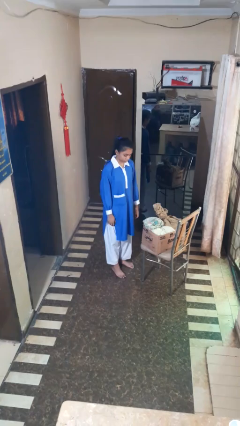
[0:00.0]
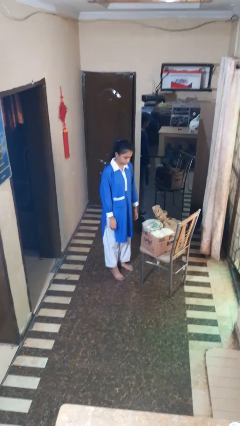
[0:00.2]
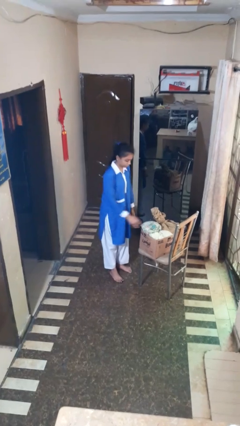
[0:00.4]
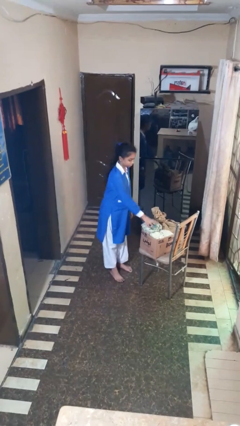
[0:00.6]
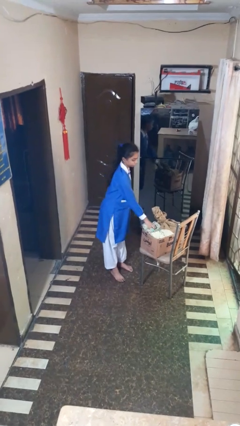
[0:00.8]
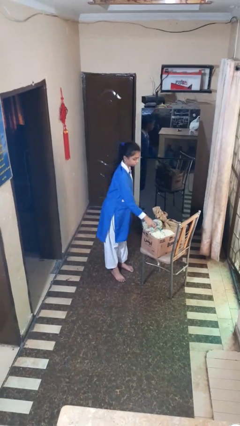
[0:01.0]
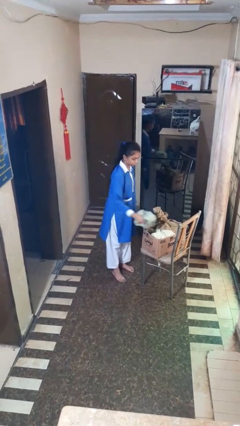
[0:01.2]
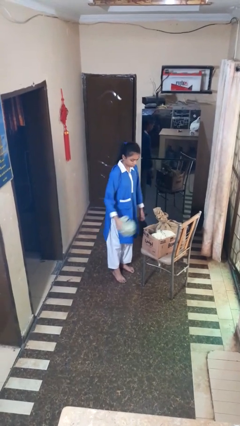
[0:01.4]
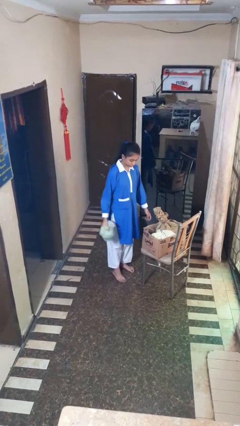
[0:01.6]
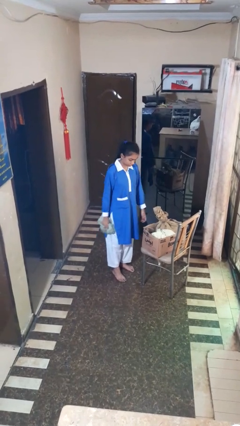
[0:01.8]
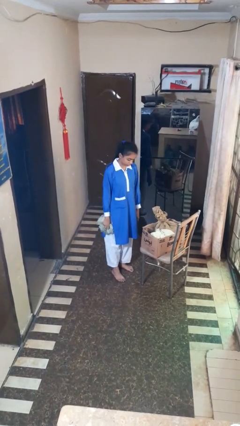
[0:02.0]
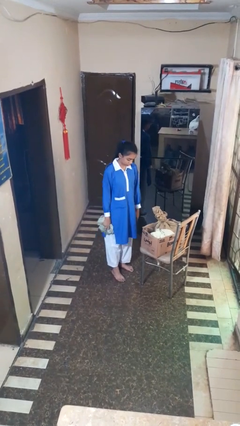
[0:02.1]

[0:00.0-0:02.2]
person takes object from box

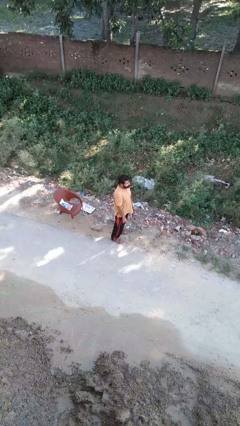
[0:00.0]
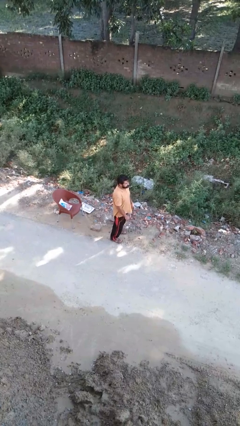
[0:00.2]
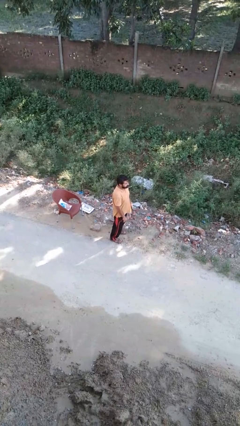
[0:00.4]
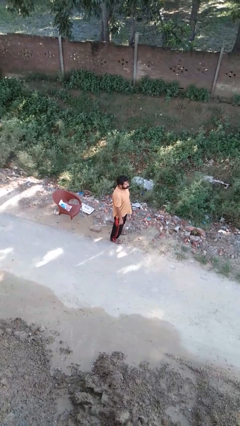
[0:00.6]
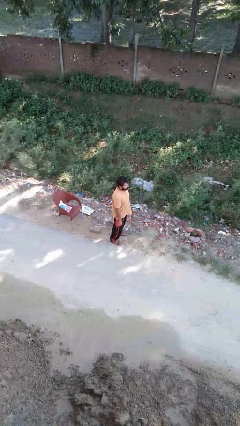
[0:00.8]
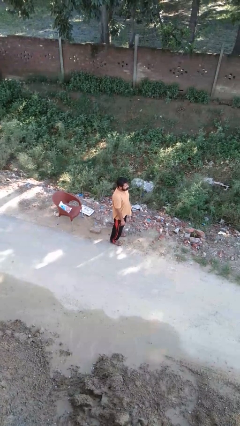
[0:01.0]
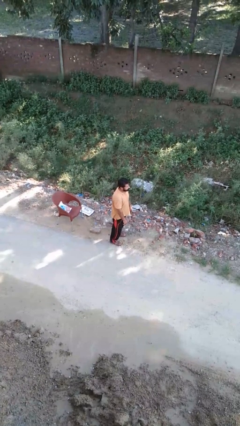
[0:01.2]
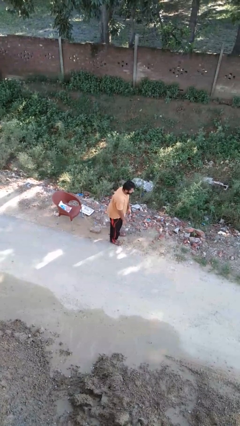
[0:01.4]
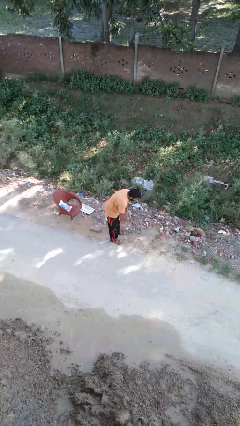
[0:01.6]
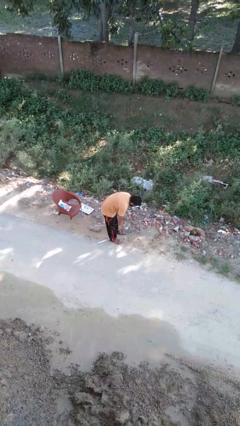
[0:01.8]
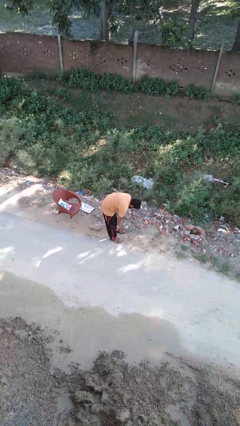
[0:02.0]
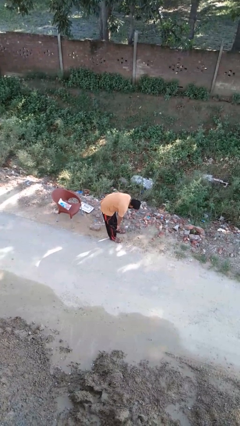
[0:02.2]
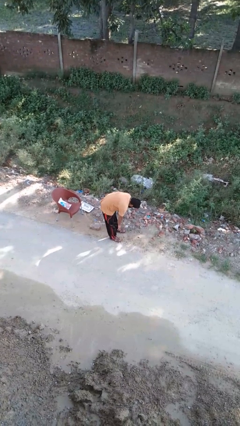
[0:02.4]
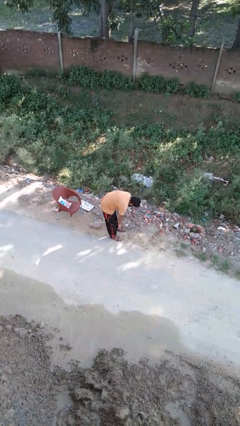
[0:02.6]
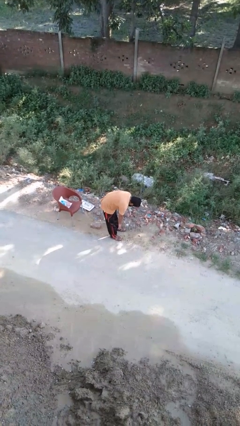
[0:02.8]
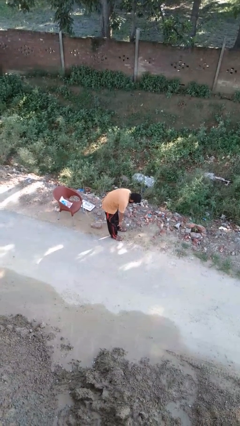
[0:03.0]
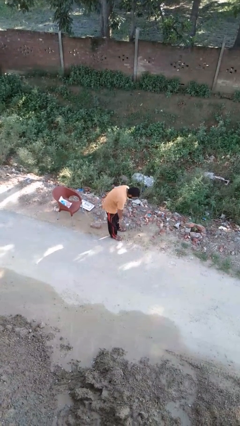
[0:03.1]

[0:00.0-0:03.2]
person bows

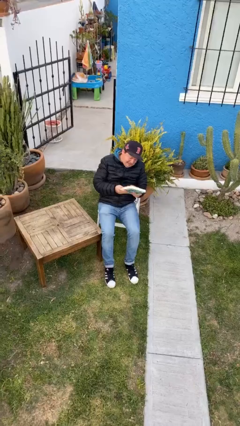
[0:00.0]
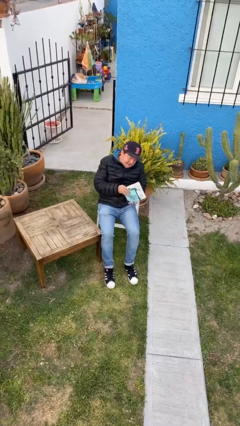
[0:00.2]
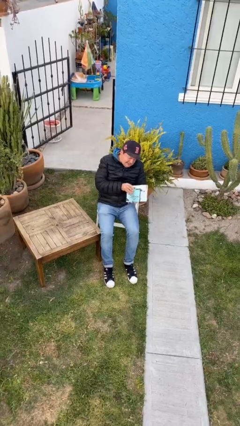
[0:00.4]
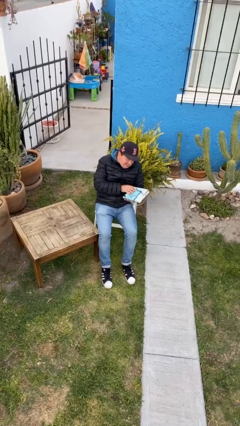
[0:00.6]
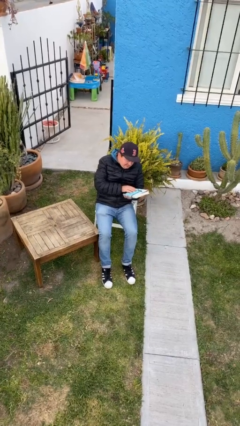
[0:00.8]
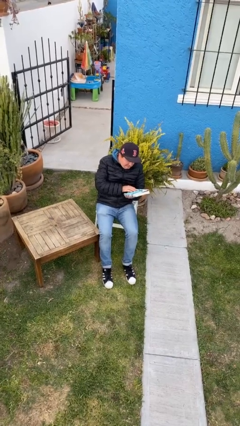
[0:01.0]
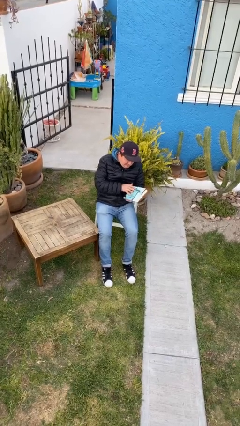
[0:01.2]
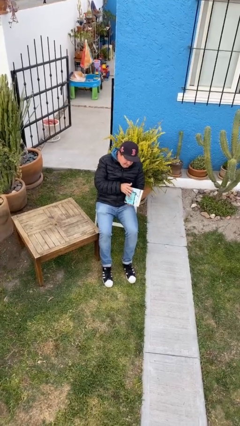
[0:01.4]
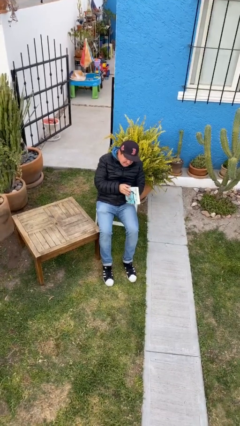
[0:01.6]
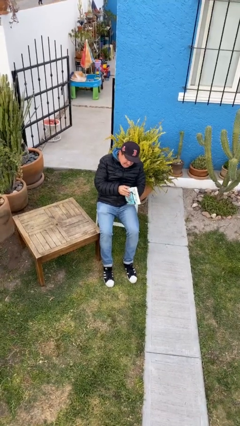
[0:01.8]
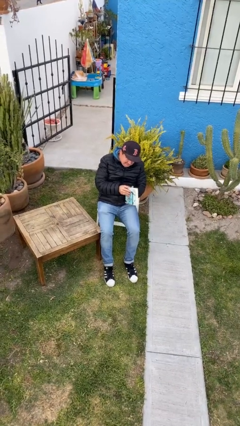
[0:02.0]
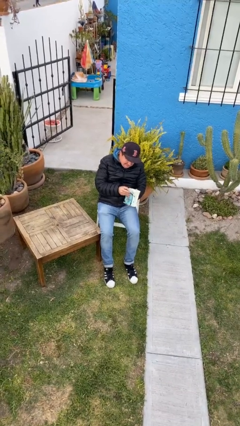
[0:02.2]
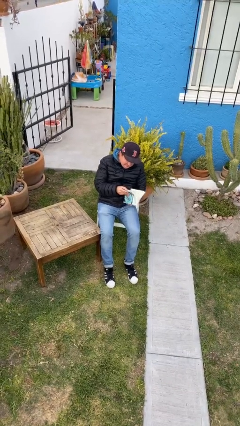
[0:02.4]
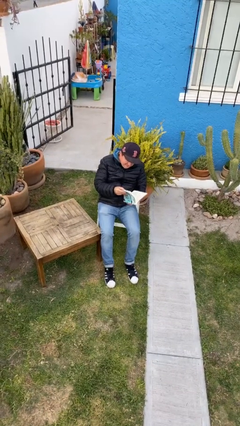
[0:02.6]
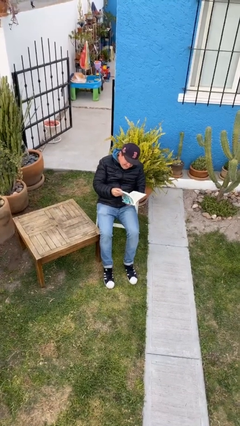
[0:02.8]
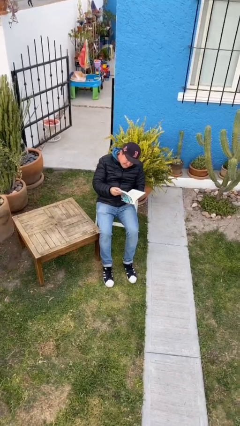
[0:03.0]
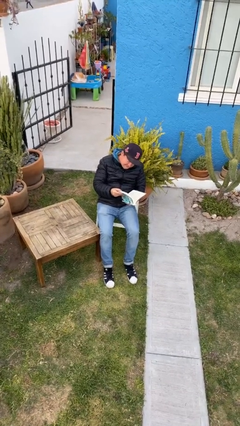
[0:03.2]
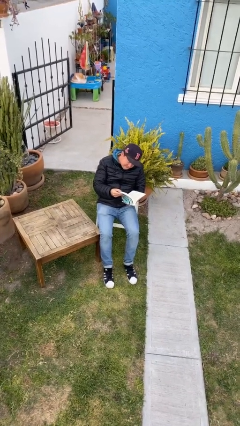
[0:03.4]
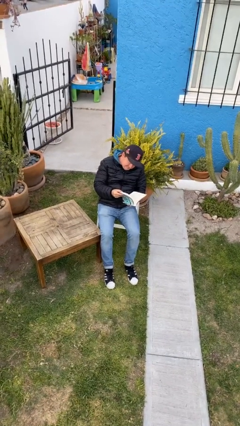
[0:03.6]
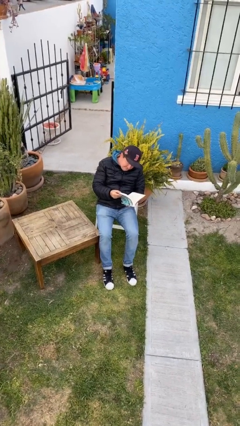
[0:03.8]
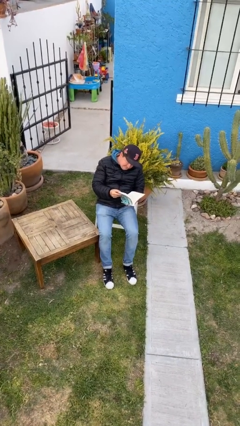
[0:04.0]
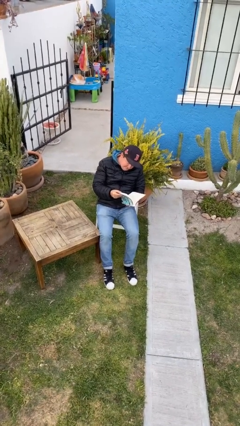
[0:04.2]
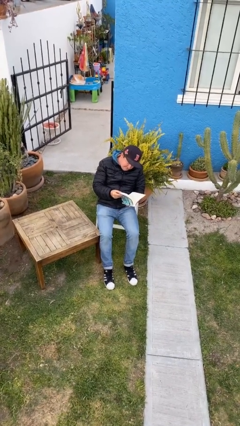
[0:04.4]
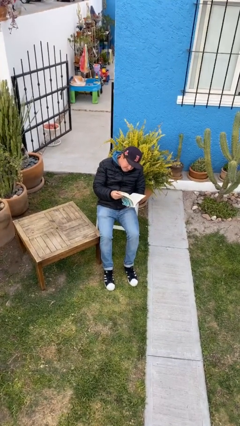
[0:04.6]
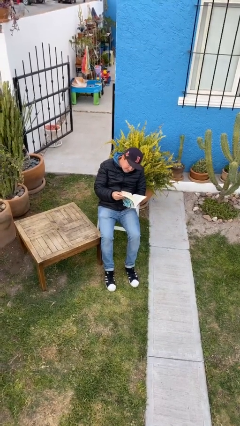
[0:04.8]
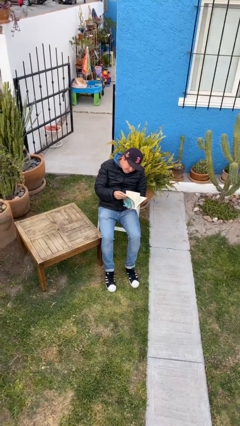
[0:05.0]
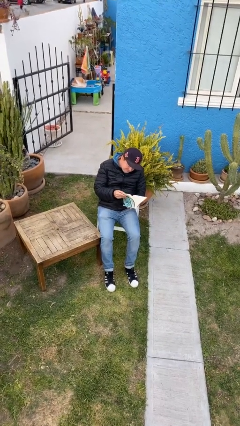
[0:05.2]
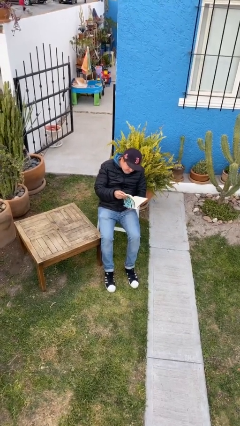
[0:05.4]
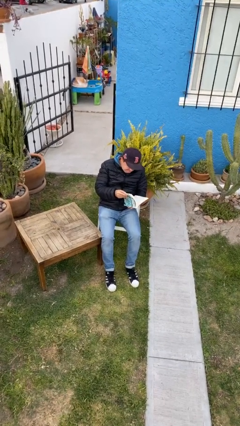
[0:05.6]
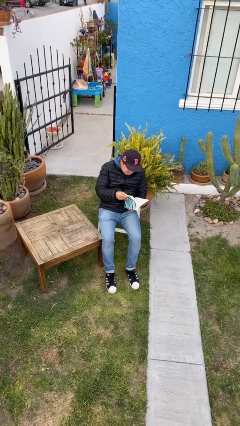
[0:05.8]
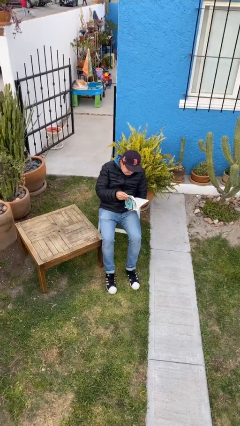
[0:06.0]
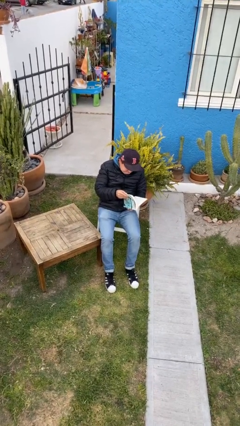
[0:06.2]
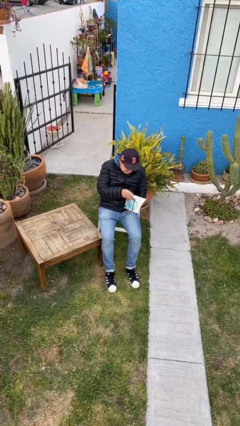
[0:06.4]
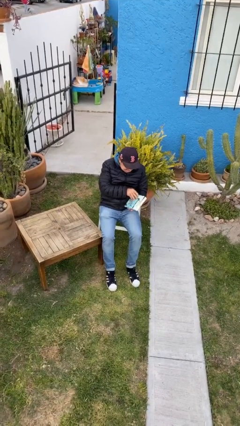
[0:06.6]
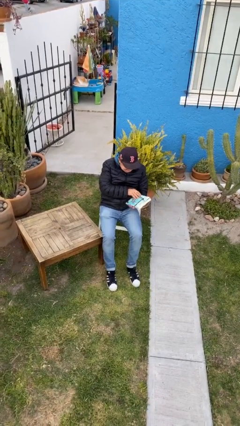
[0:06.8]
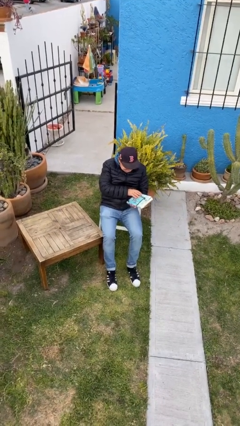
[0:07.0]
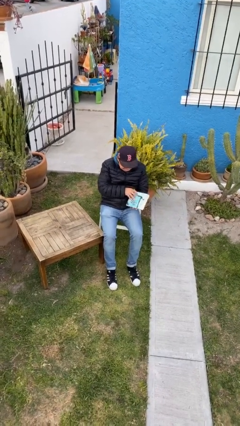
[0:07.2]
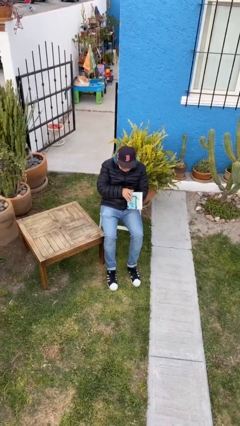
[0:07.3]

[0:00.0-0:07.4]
person reads document

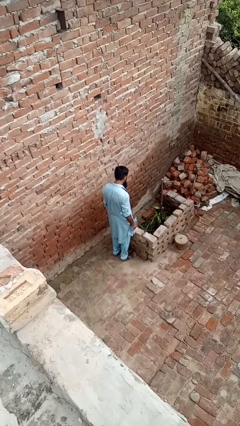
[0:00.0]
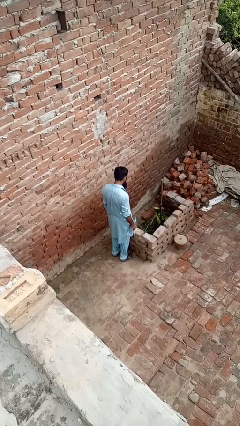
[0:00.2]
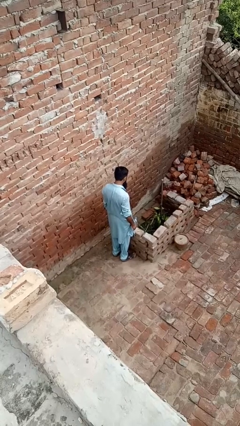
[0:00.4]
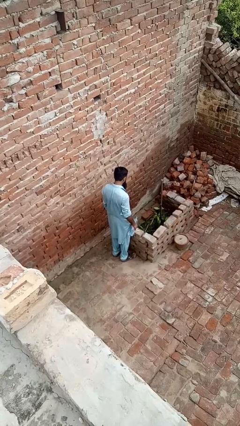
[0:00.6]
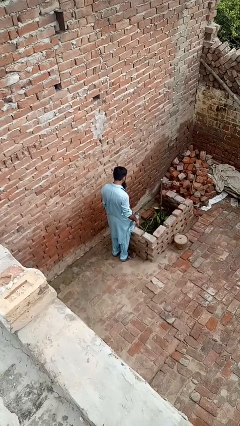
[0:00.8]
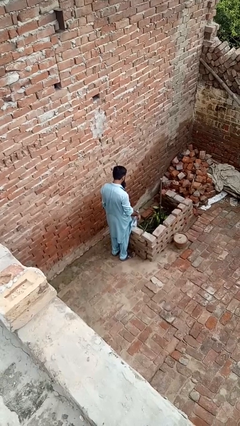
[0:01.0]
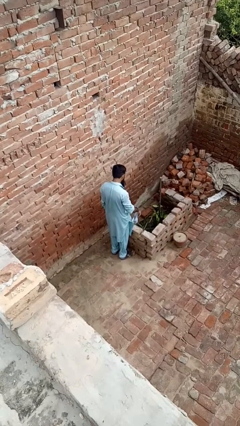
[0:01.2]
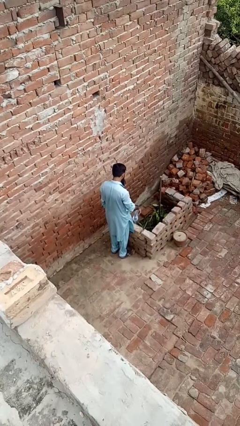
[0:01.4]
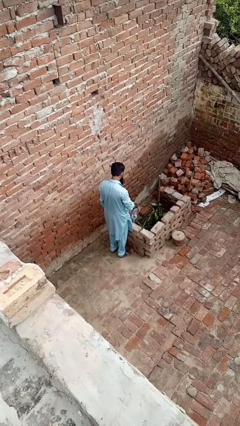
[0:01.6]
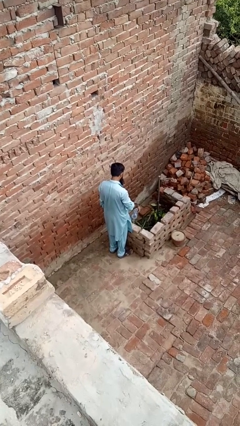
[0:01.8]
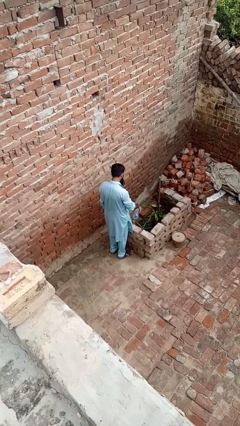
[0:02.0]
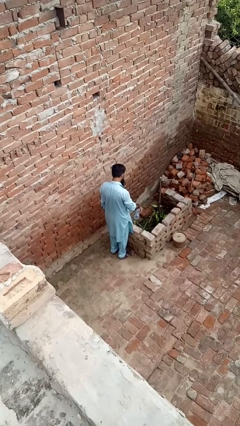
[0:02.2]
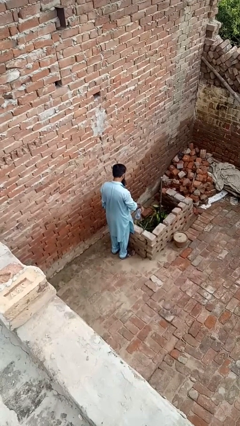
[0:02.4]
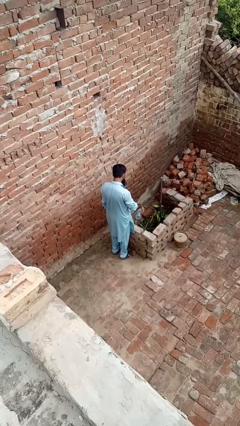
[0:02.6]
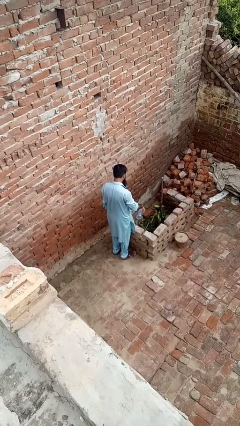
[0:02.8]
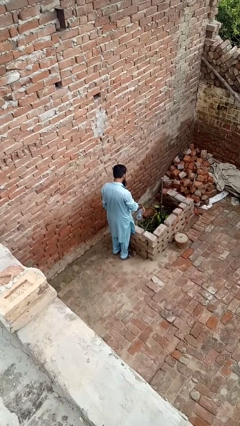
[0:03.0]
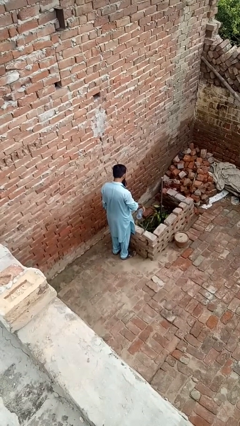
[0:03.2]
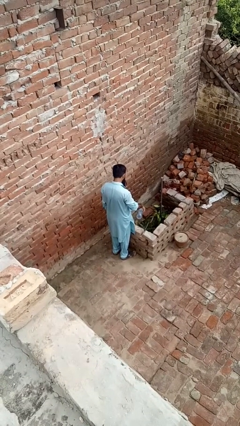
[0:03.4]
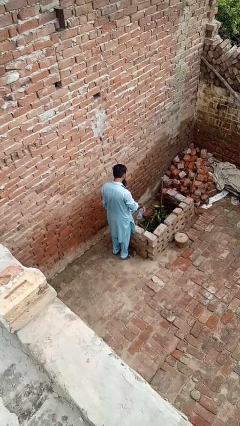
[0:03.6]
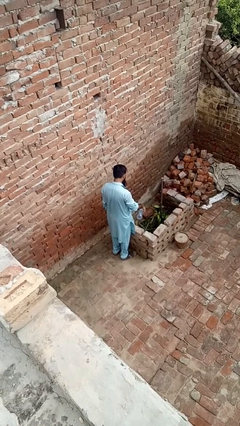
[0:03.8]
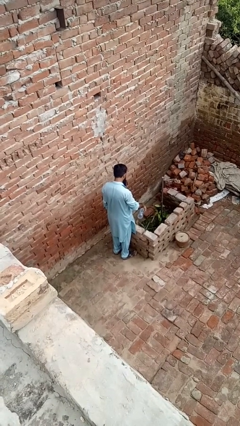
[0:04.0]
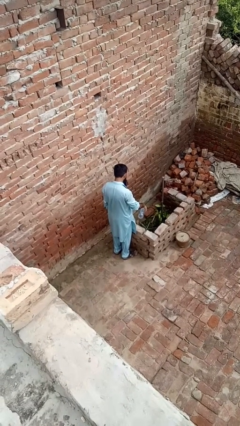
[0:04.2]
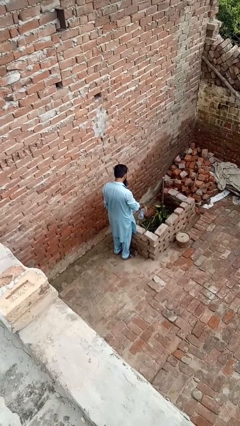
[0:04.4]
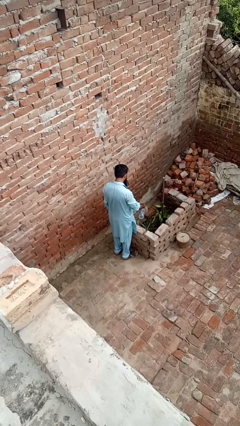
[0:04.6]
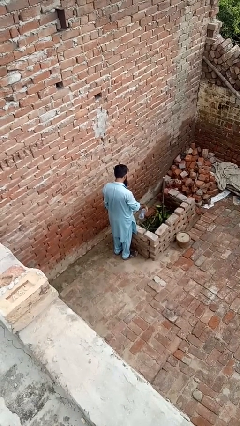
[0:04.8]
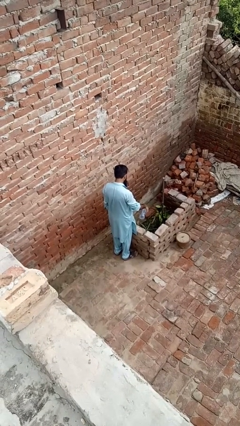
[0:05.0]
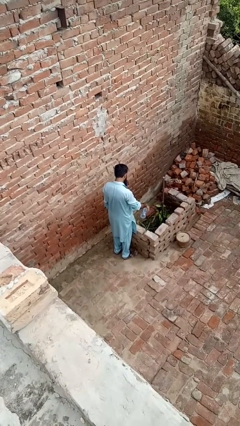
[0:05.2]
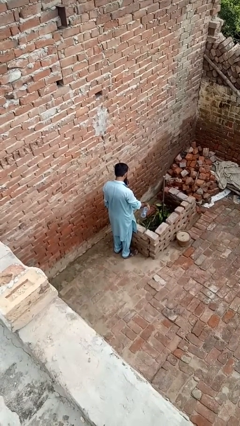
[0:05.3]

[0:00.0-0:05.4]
person waters houseplant
